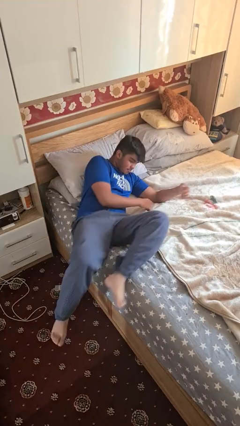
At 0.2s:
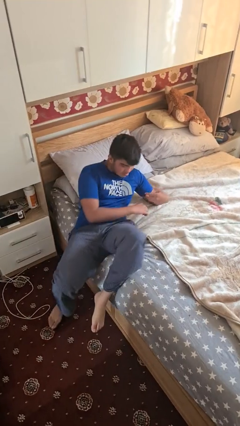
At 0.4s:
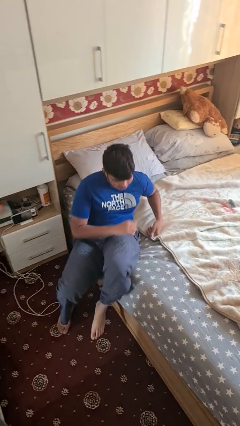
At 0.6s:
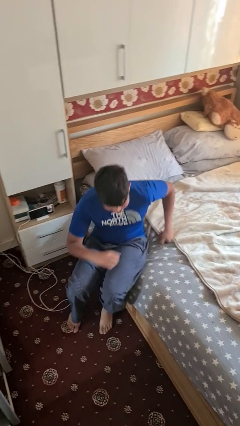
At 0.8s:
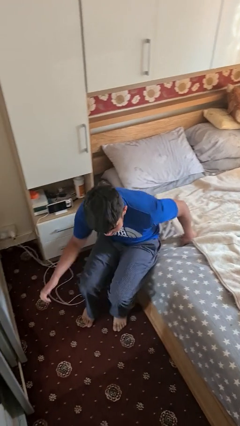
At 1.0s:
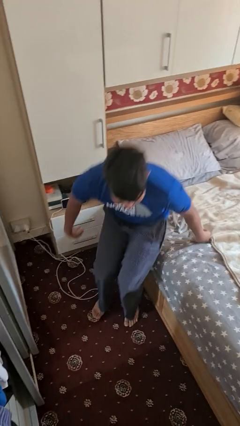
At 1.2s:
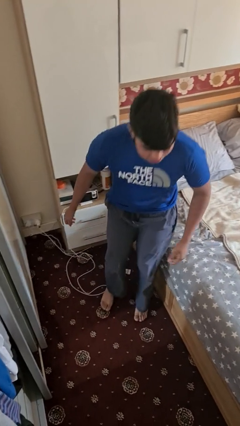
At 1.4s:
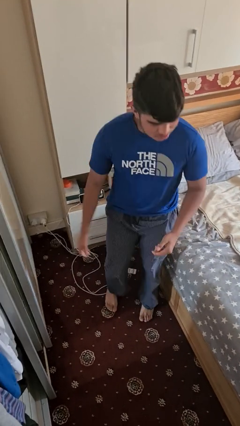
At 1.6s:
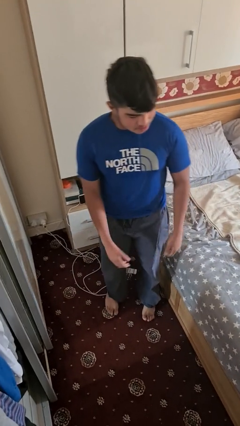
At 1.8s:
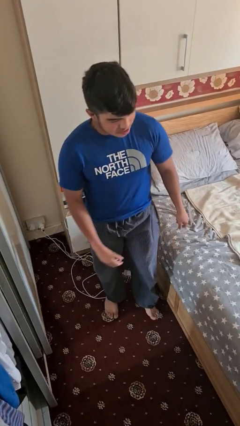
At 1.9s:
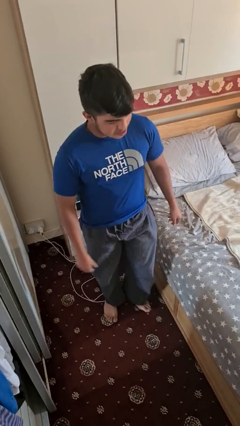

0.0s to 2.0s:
person stands up

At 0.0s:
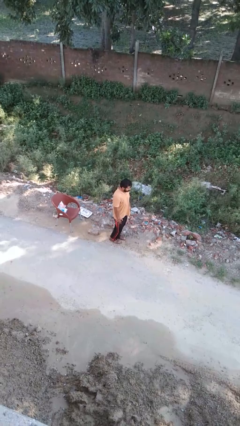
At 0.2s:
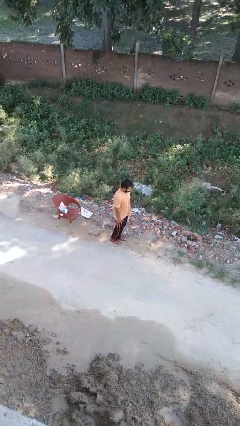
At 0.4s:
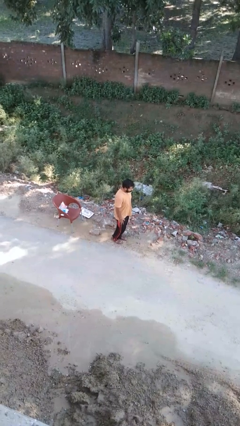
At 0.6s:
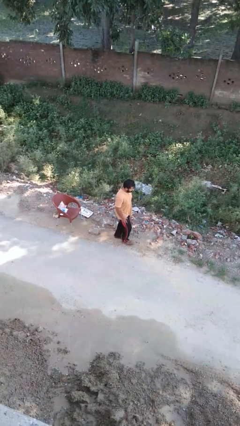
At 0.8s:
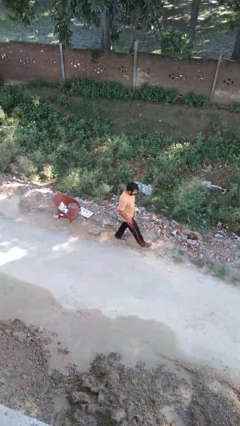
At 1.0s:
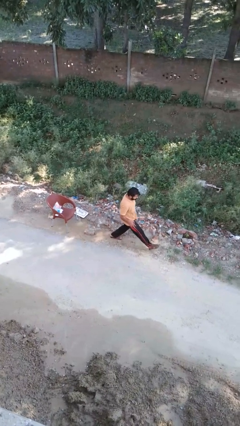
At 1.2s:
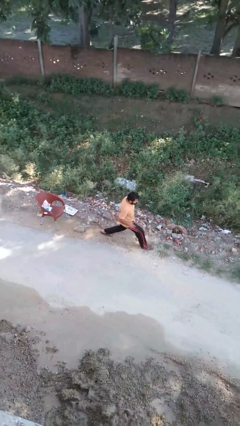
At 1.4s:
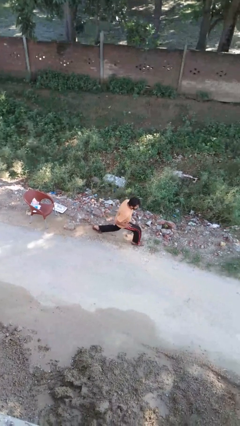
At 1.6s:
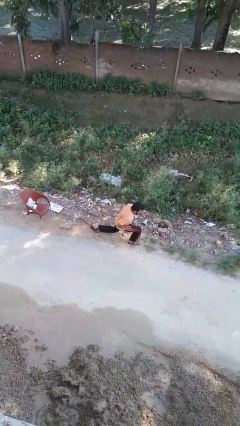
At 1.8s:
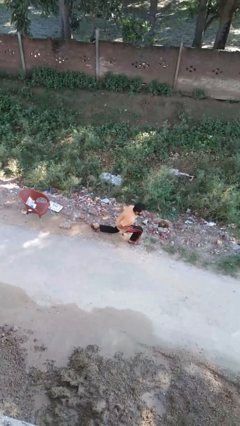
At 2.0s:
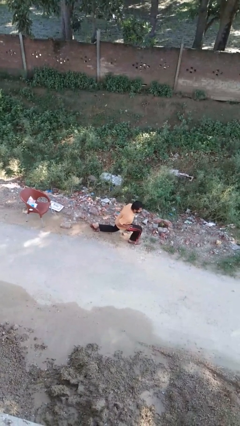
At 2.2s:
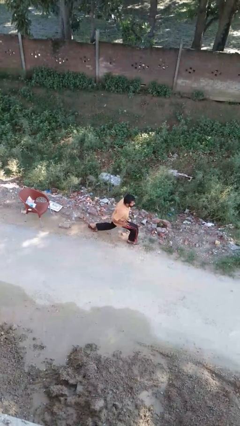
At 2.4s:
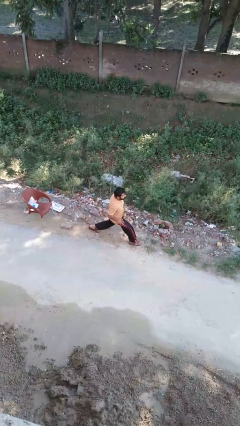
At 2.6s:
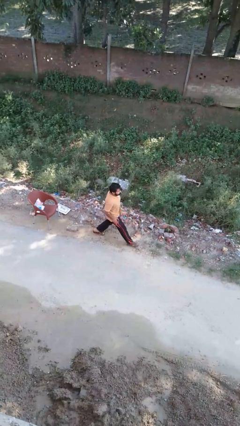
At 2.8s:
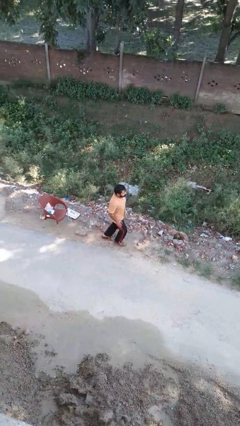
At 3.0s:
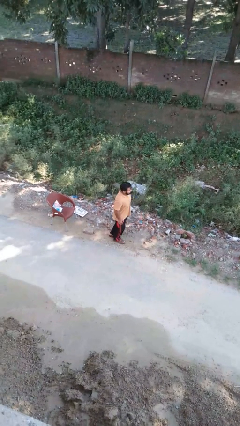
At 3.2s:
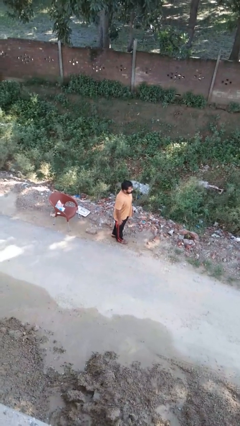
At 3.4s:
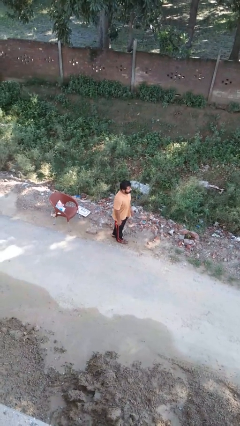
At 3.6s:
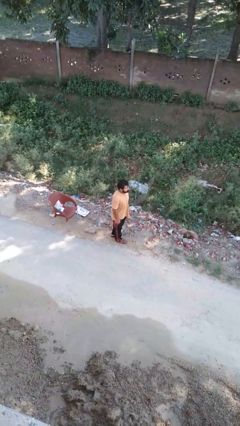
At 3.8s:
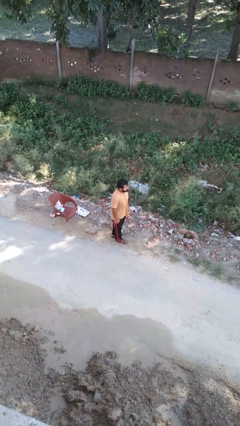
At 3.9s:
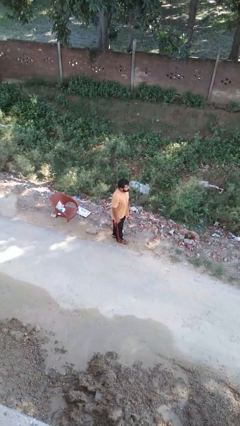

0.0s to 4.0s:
person exercises with lunges

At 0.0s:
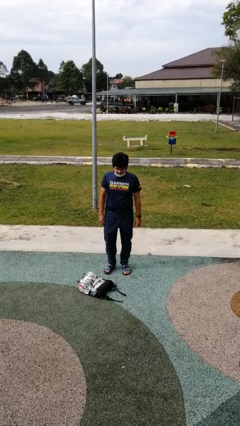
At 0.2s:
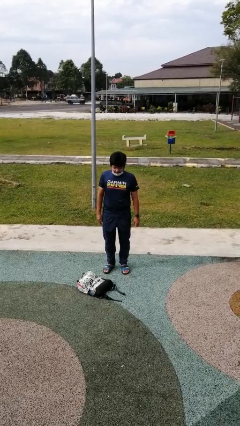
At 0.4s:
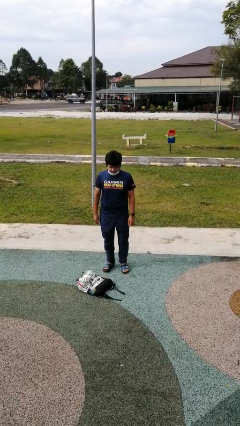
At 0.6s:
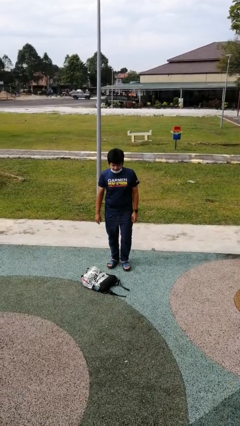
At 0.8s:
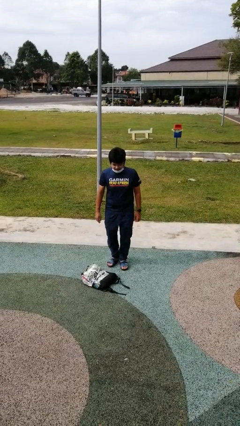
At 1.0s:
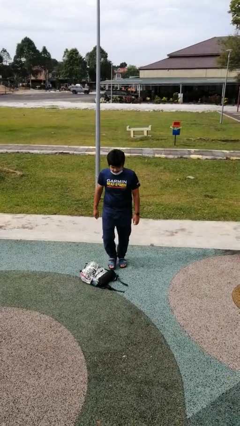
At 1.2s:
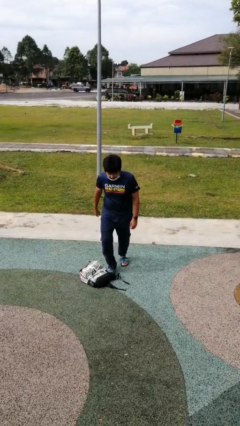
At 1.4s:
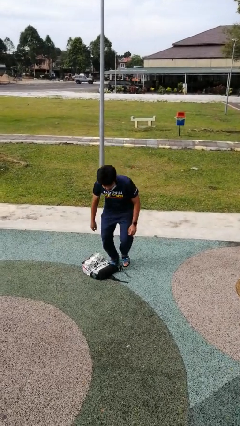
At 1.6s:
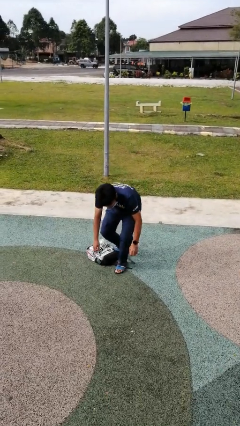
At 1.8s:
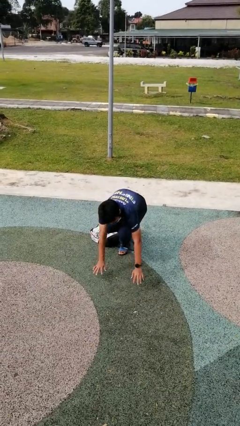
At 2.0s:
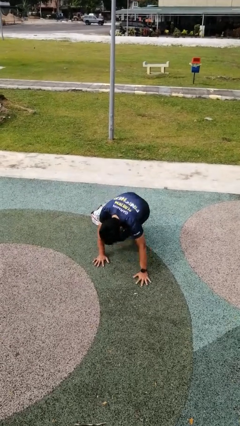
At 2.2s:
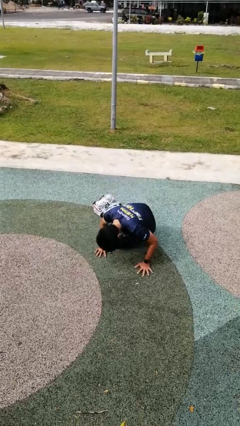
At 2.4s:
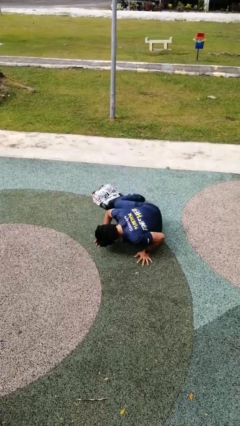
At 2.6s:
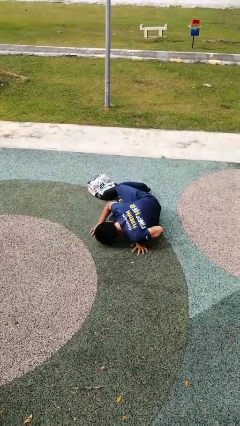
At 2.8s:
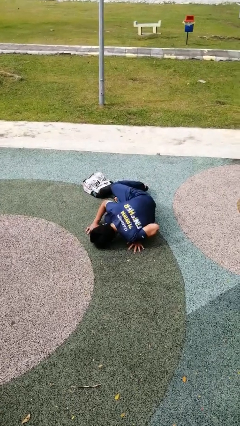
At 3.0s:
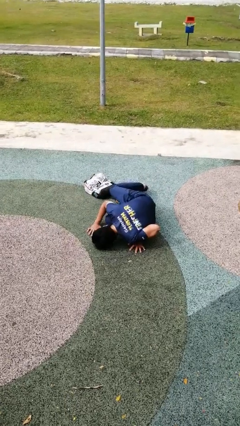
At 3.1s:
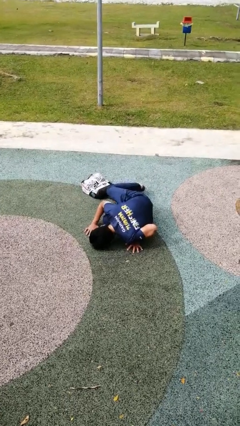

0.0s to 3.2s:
person trips on object on floor

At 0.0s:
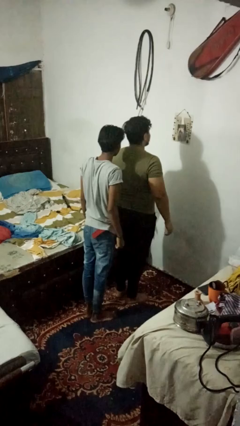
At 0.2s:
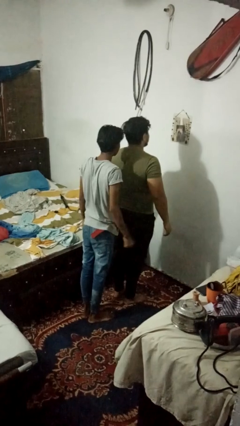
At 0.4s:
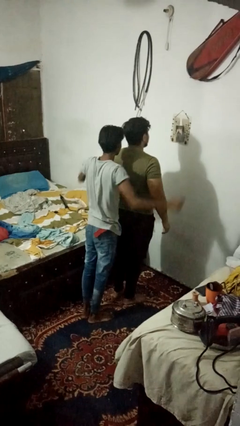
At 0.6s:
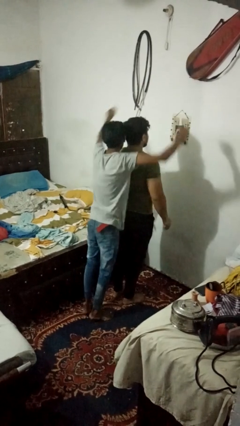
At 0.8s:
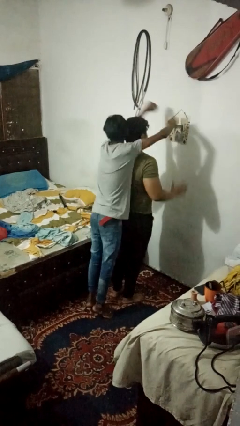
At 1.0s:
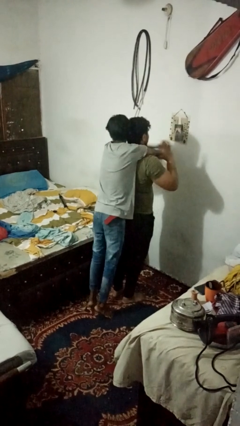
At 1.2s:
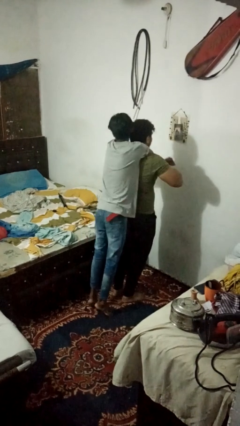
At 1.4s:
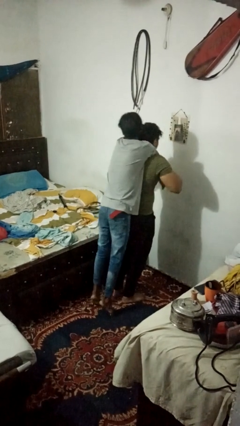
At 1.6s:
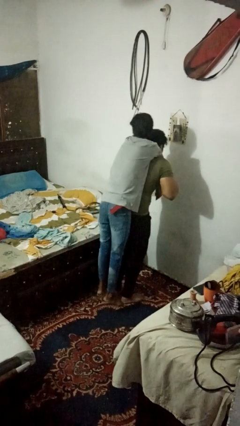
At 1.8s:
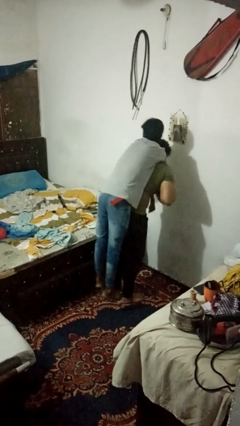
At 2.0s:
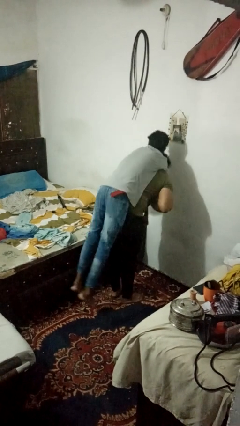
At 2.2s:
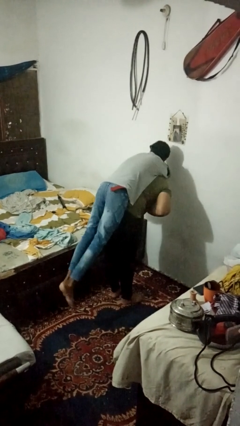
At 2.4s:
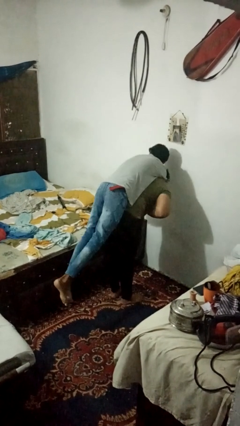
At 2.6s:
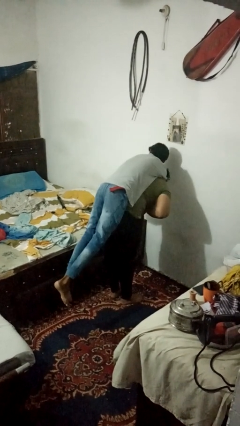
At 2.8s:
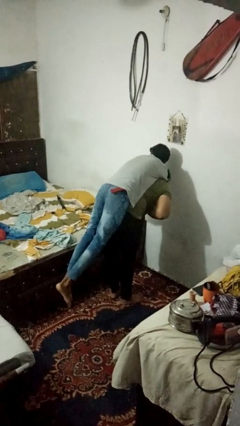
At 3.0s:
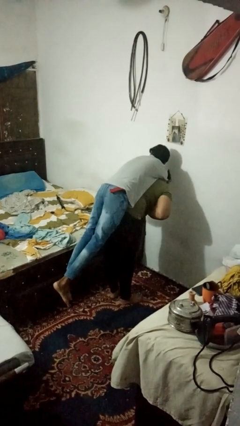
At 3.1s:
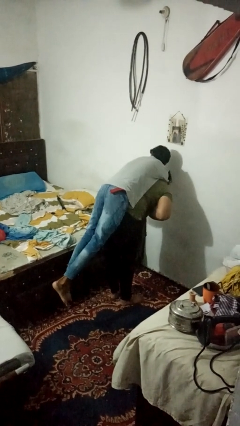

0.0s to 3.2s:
person carries person on shoulders

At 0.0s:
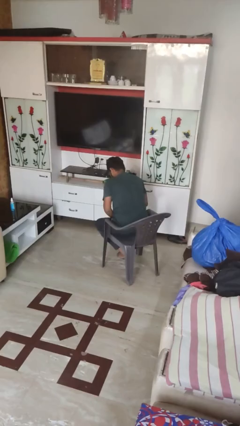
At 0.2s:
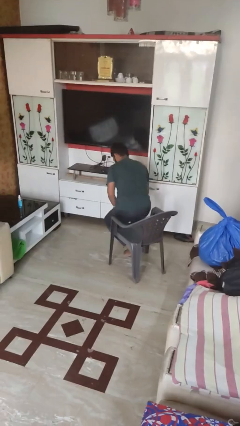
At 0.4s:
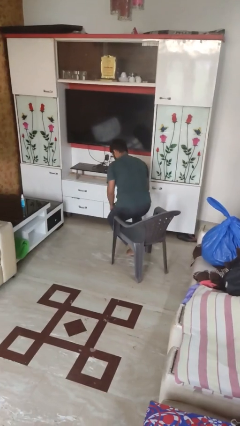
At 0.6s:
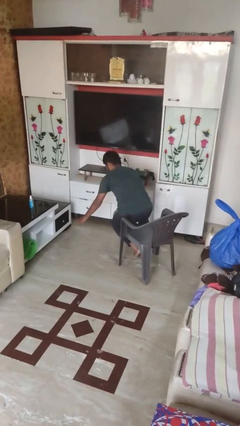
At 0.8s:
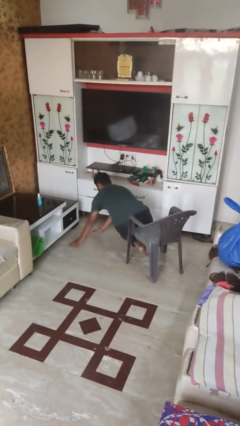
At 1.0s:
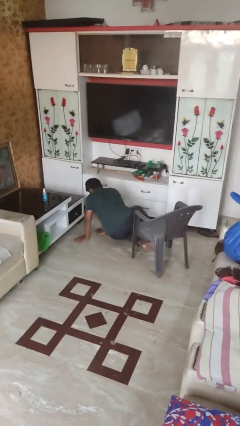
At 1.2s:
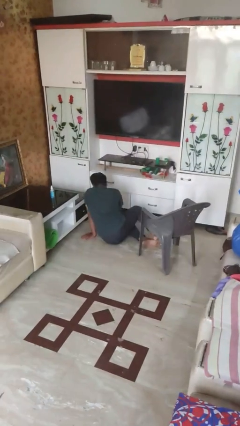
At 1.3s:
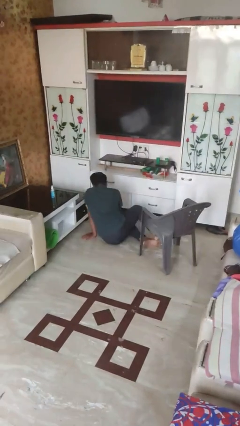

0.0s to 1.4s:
person falls from chair

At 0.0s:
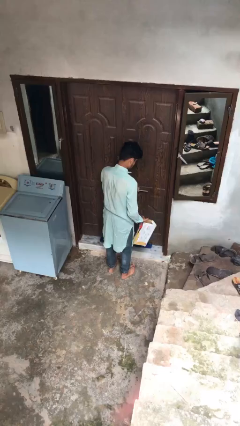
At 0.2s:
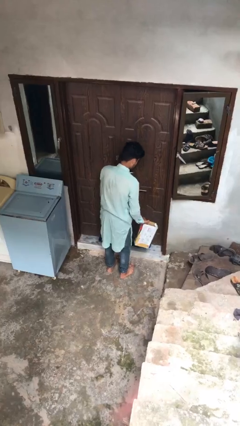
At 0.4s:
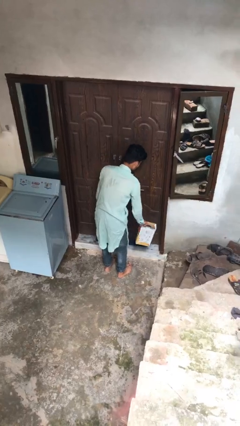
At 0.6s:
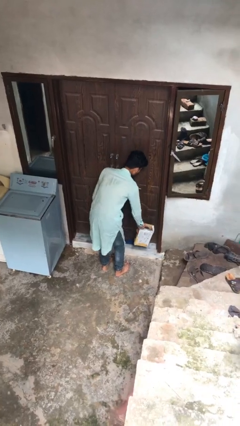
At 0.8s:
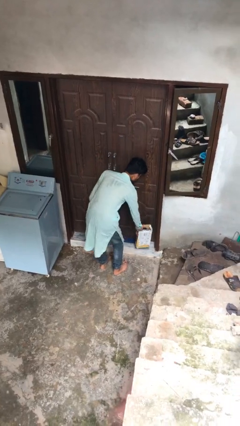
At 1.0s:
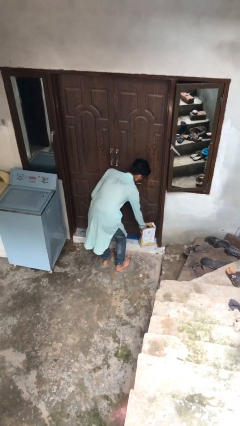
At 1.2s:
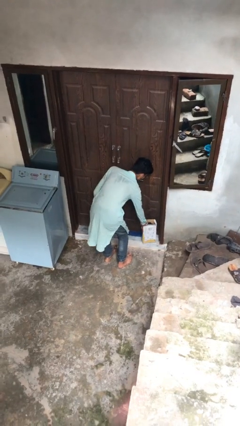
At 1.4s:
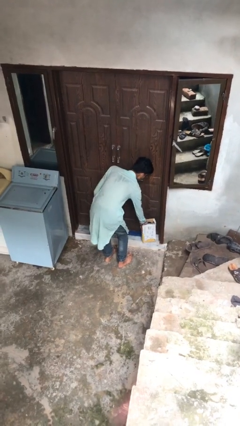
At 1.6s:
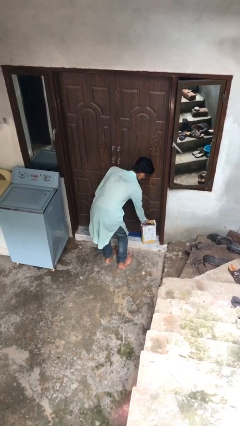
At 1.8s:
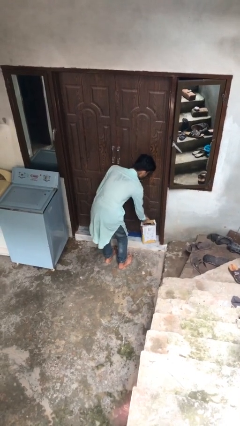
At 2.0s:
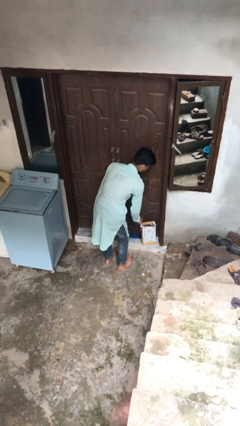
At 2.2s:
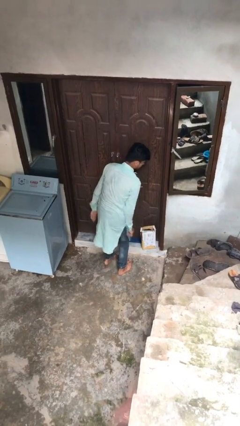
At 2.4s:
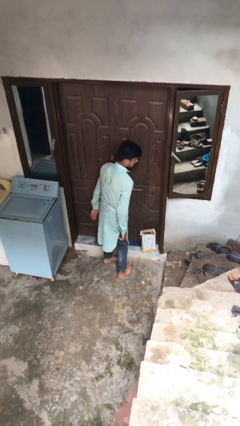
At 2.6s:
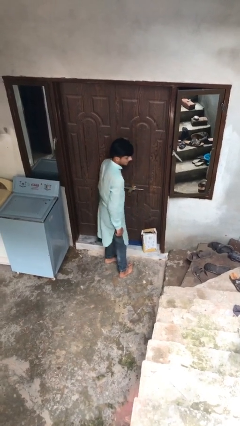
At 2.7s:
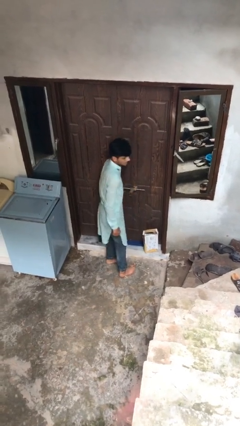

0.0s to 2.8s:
person puts down object on floor

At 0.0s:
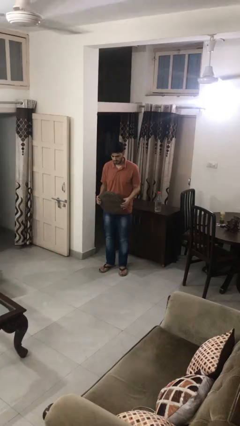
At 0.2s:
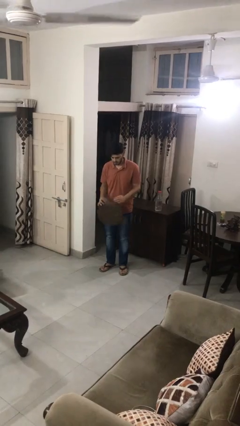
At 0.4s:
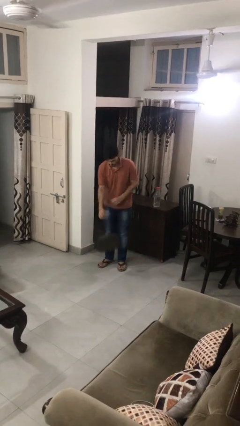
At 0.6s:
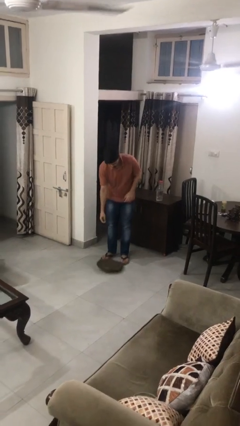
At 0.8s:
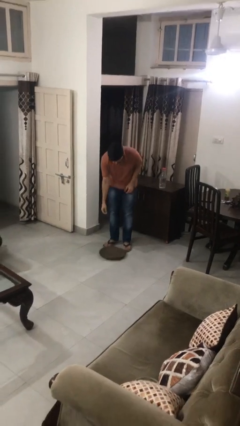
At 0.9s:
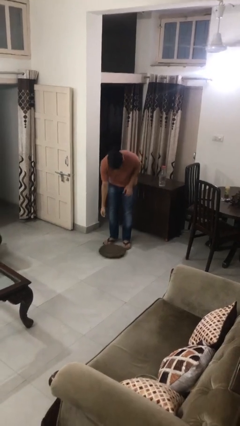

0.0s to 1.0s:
person drops object
